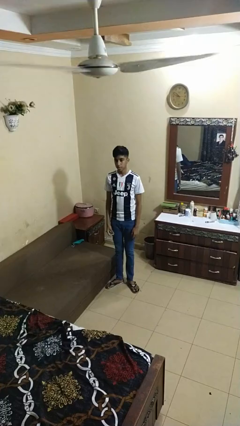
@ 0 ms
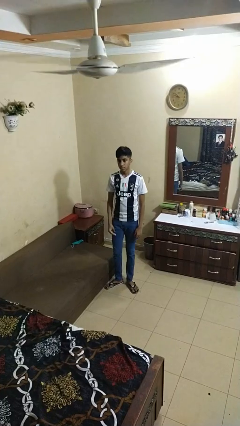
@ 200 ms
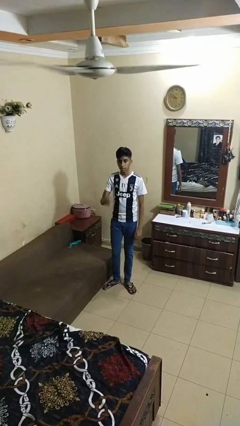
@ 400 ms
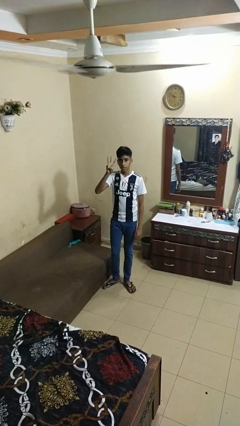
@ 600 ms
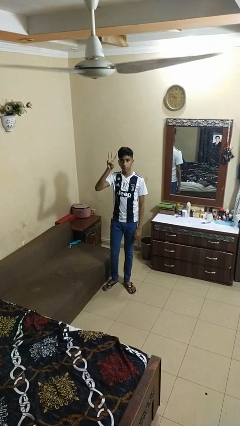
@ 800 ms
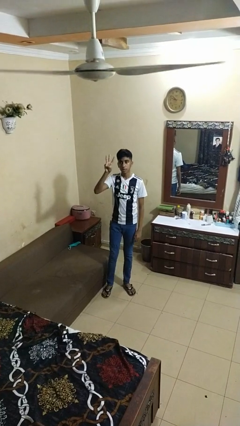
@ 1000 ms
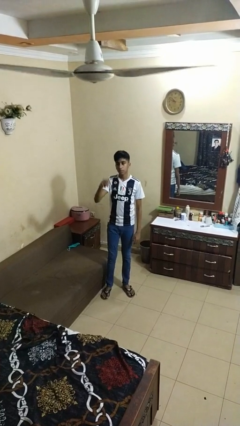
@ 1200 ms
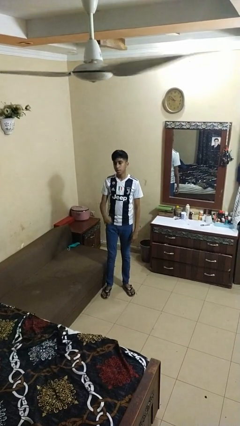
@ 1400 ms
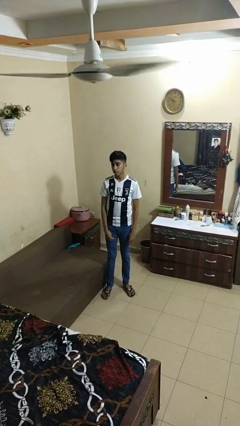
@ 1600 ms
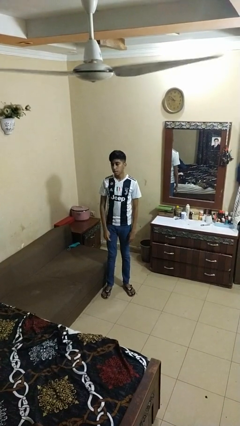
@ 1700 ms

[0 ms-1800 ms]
person gestures number three

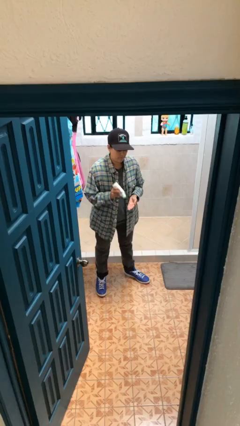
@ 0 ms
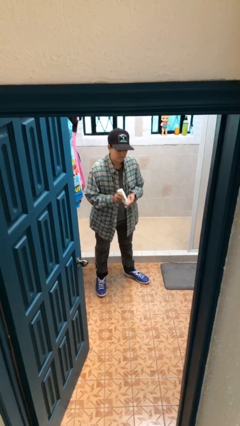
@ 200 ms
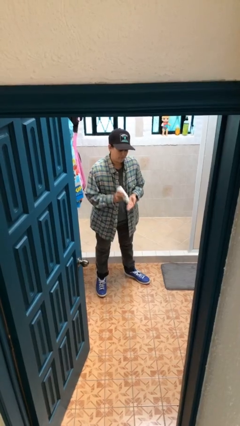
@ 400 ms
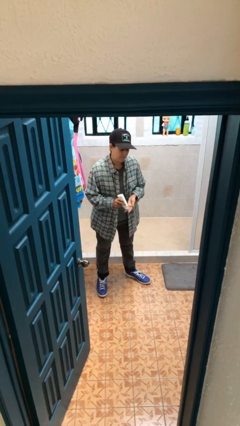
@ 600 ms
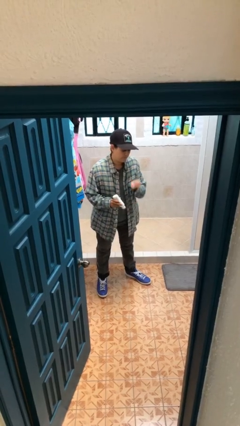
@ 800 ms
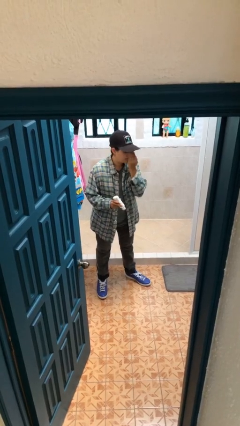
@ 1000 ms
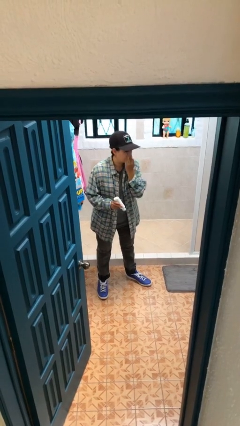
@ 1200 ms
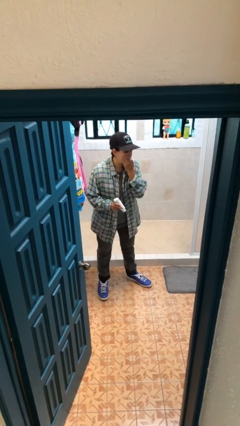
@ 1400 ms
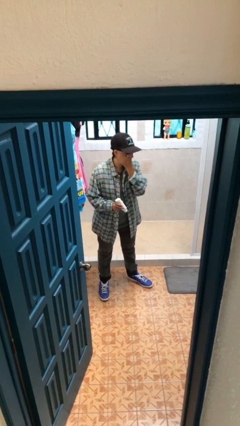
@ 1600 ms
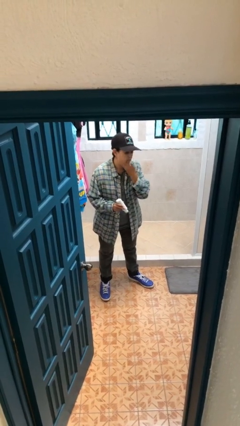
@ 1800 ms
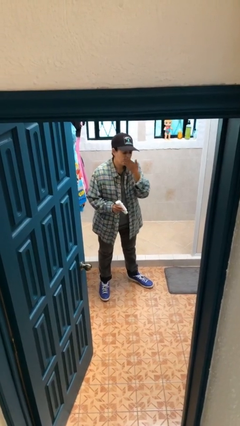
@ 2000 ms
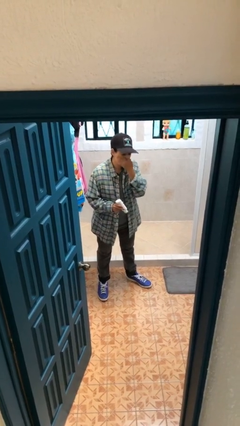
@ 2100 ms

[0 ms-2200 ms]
person applies facial moisturizer

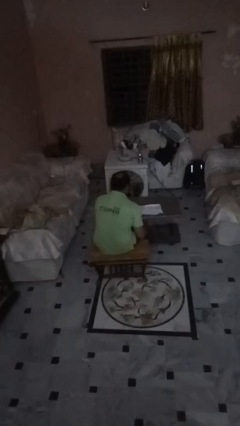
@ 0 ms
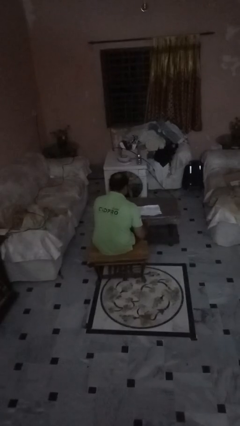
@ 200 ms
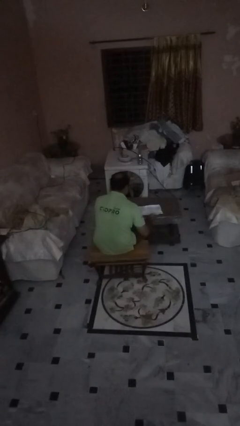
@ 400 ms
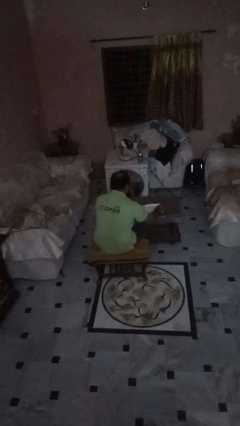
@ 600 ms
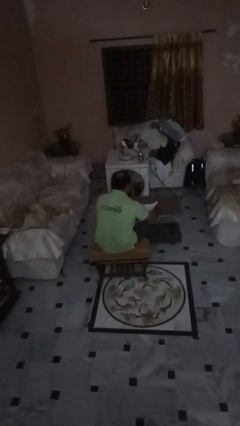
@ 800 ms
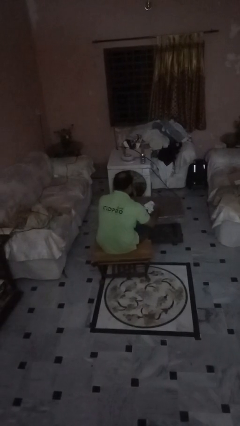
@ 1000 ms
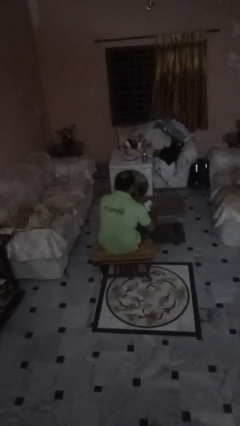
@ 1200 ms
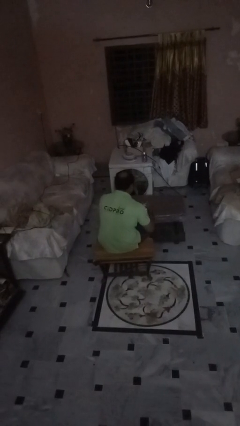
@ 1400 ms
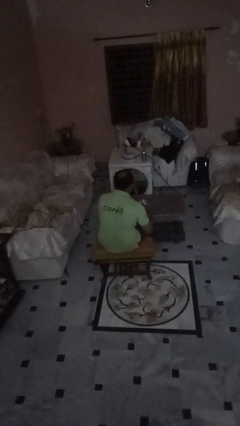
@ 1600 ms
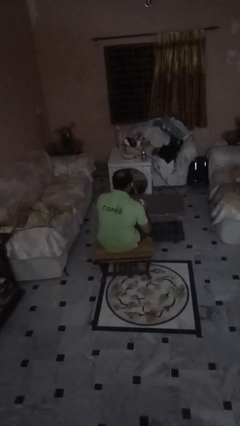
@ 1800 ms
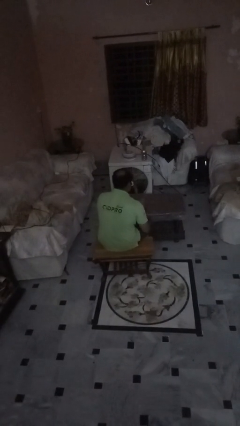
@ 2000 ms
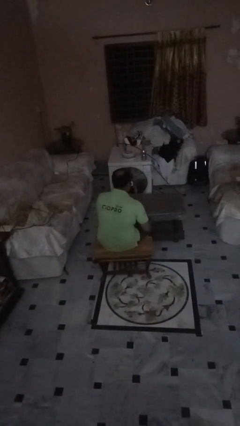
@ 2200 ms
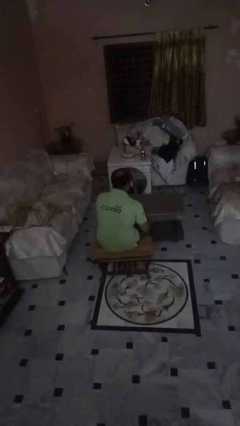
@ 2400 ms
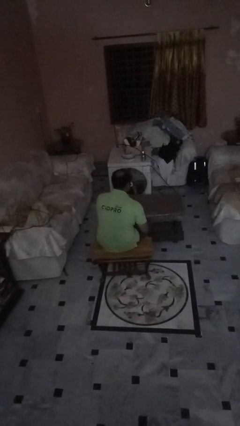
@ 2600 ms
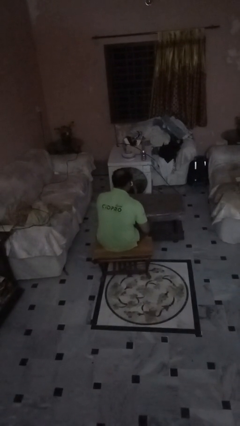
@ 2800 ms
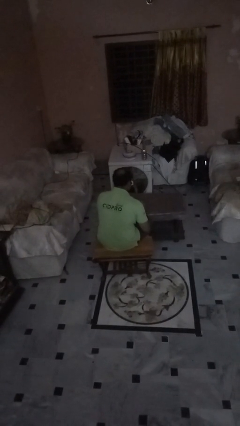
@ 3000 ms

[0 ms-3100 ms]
person crumples paper

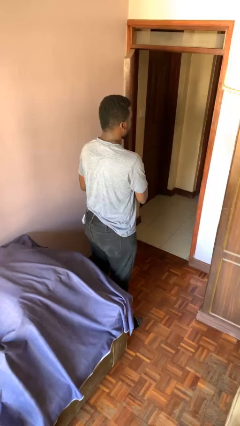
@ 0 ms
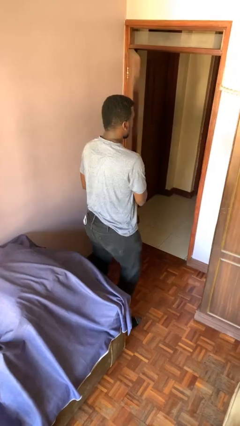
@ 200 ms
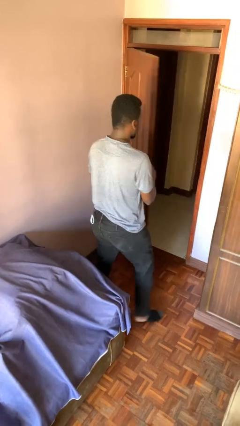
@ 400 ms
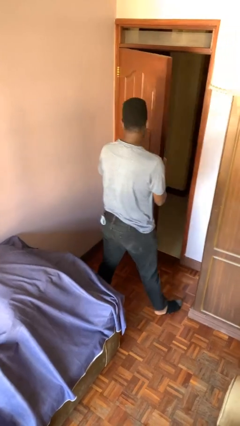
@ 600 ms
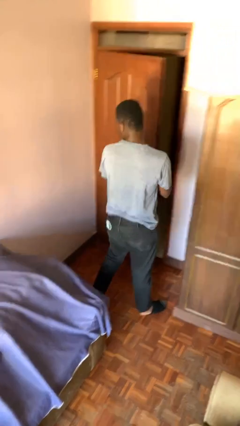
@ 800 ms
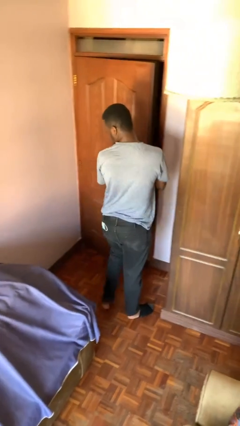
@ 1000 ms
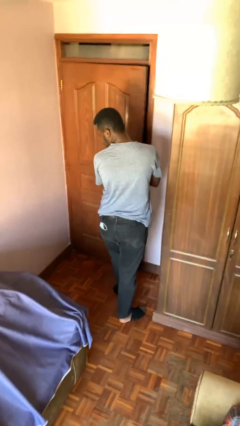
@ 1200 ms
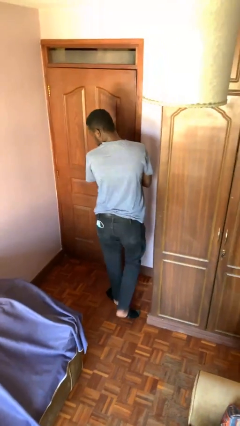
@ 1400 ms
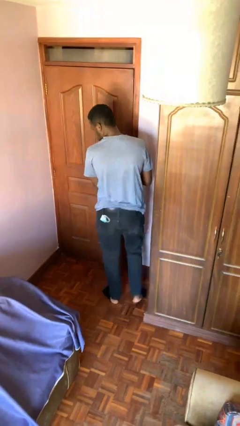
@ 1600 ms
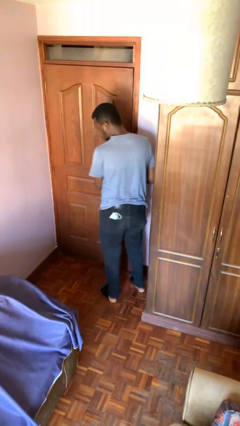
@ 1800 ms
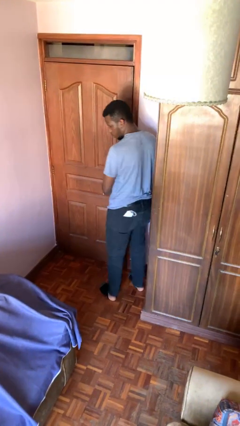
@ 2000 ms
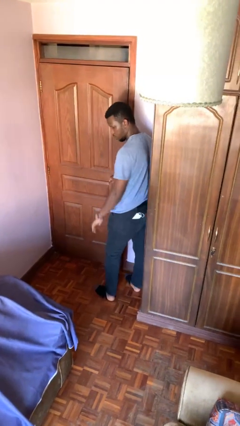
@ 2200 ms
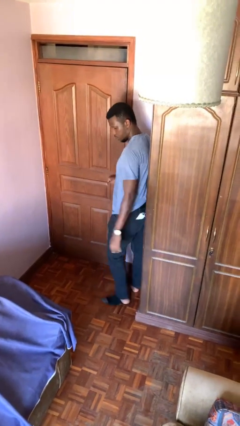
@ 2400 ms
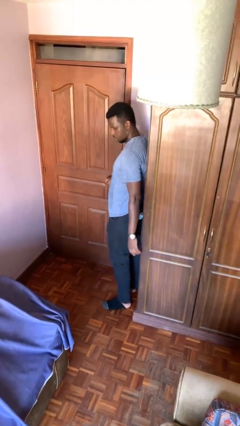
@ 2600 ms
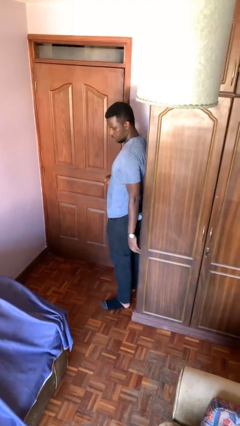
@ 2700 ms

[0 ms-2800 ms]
person closes facility door

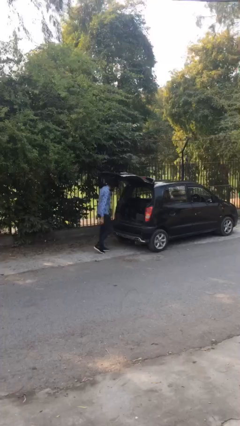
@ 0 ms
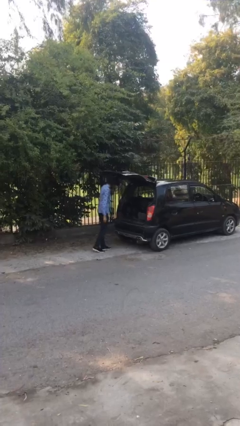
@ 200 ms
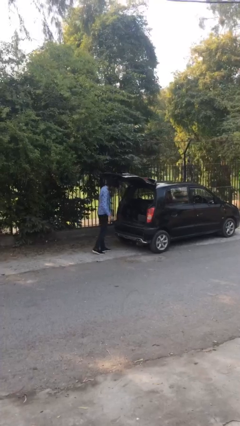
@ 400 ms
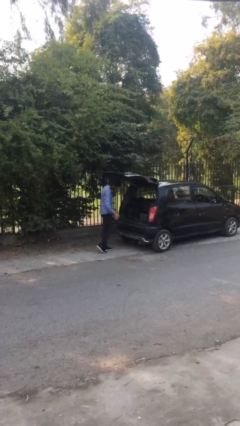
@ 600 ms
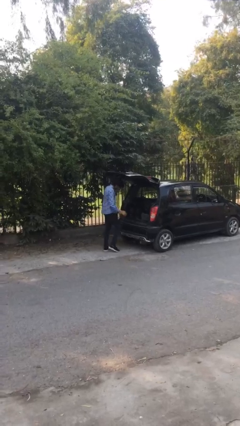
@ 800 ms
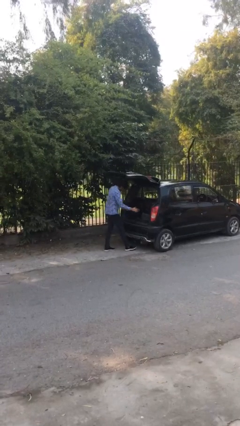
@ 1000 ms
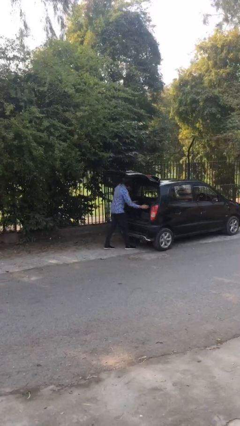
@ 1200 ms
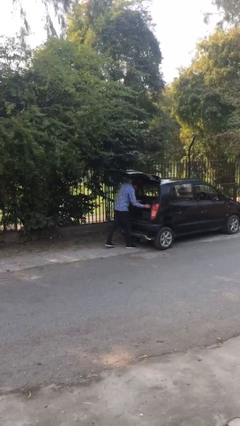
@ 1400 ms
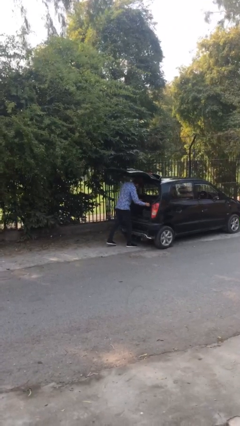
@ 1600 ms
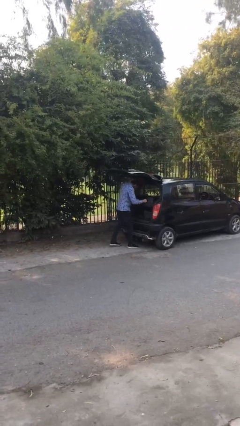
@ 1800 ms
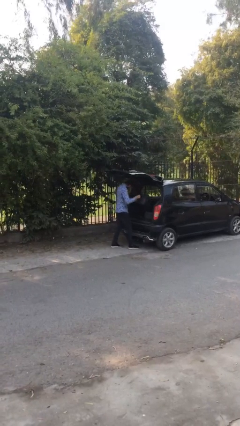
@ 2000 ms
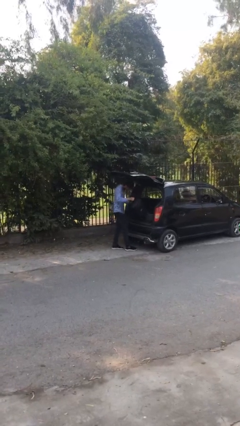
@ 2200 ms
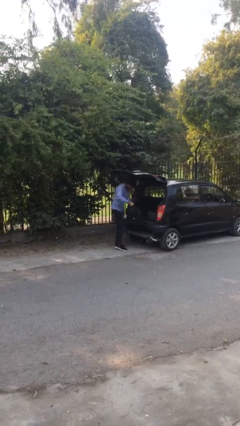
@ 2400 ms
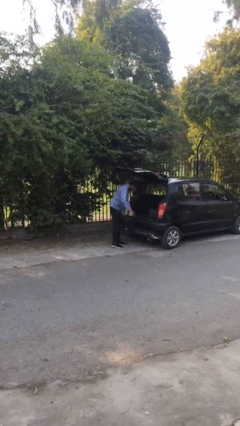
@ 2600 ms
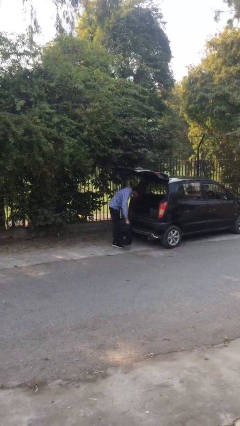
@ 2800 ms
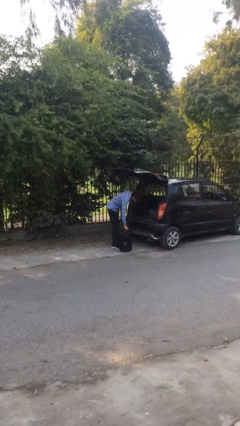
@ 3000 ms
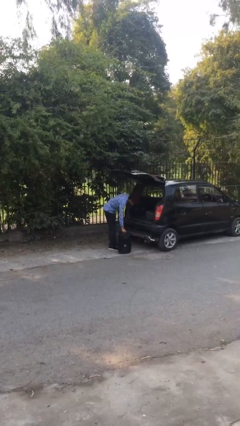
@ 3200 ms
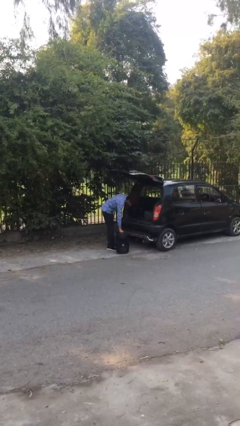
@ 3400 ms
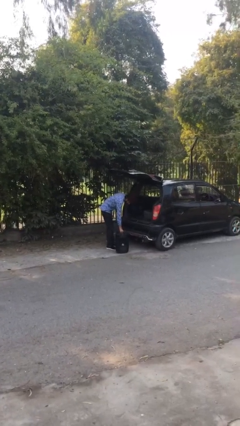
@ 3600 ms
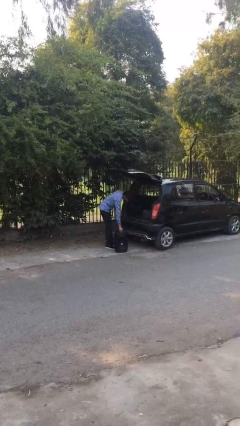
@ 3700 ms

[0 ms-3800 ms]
person unloads car

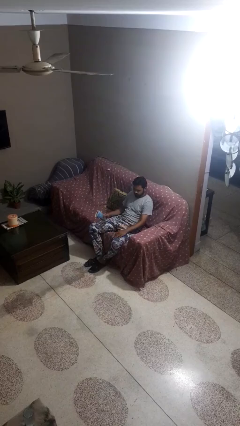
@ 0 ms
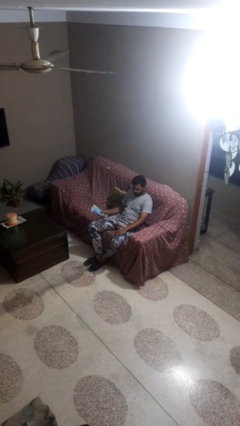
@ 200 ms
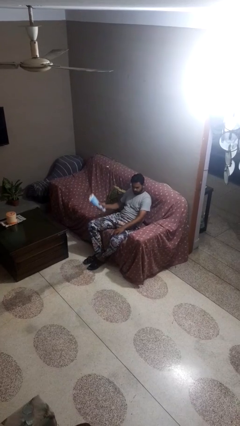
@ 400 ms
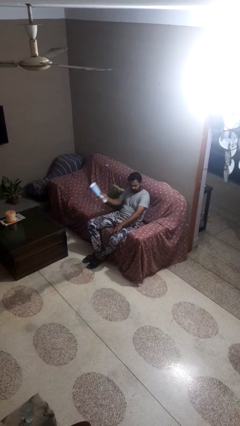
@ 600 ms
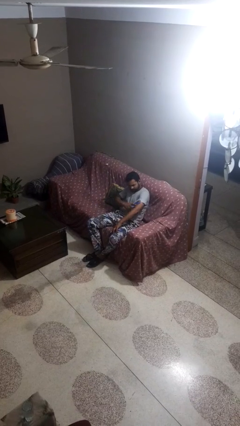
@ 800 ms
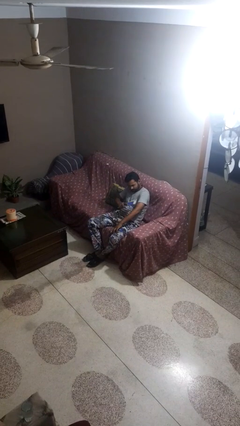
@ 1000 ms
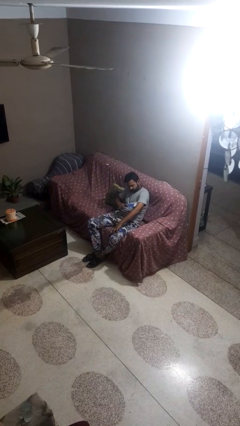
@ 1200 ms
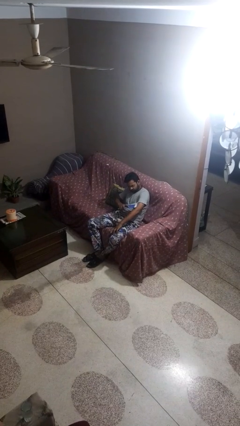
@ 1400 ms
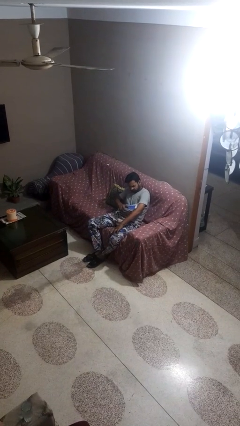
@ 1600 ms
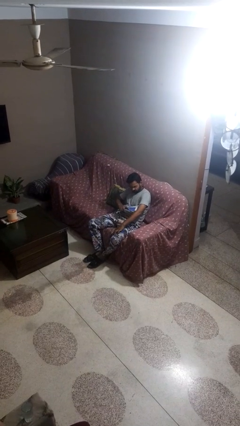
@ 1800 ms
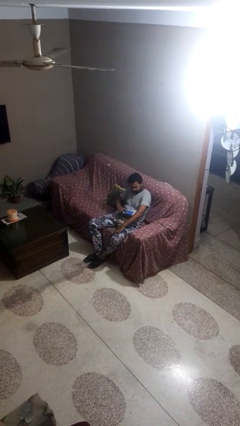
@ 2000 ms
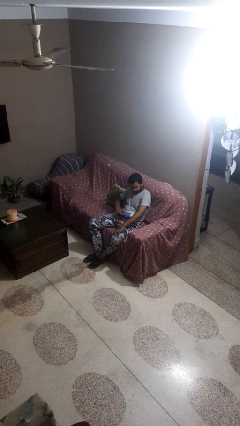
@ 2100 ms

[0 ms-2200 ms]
person swats bug

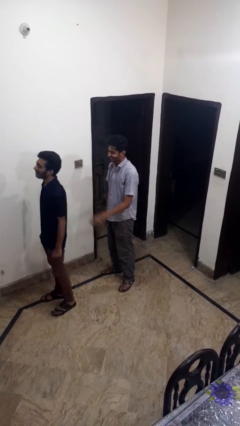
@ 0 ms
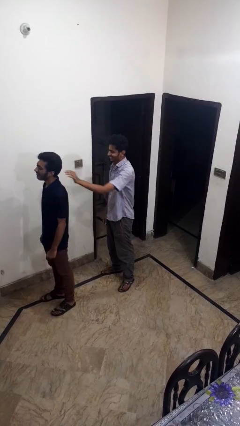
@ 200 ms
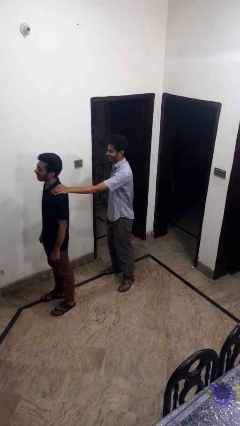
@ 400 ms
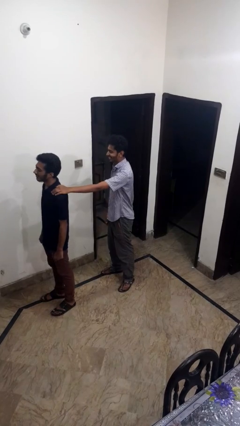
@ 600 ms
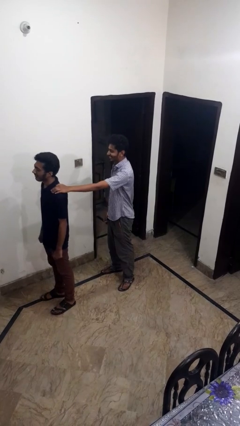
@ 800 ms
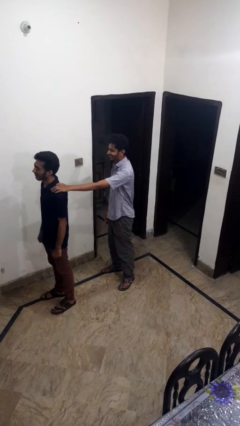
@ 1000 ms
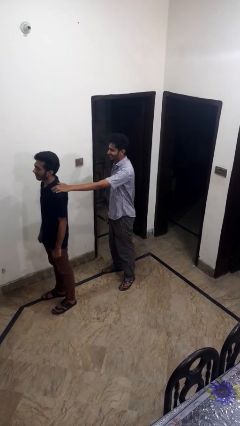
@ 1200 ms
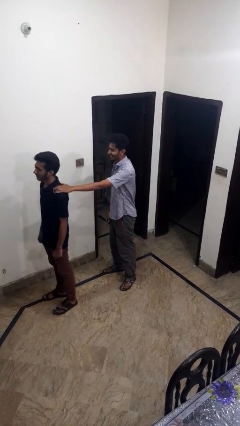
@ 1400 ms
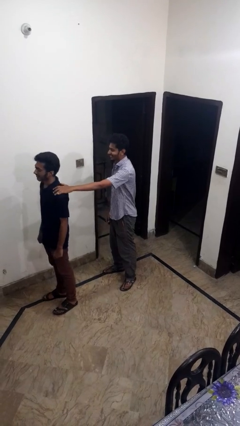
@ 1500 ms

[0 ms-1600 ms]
person grabs person by shoulder
